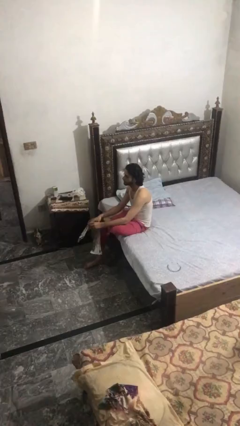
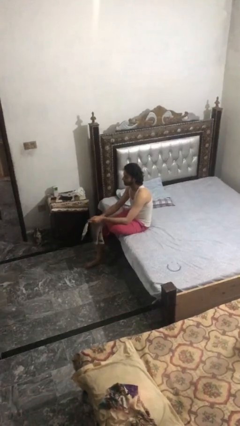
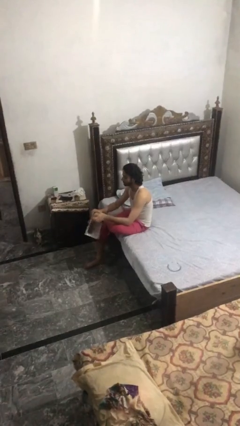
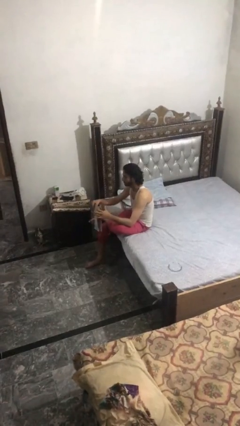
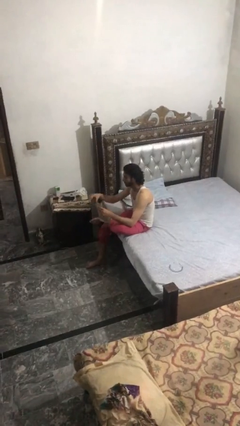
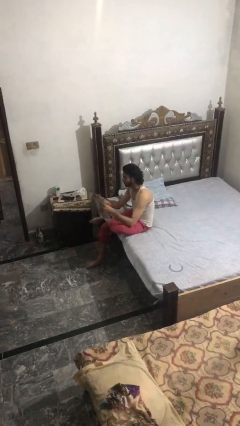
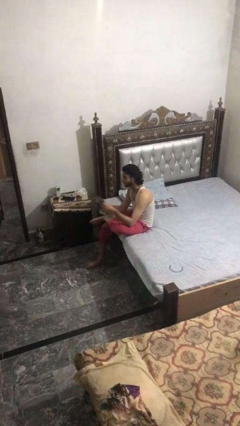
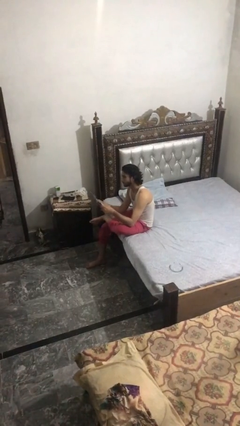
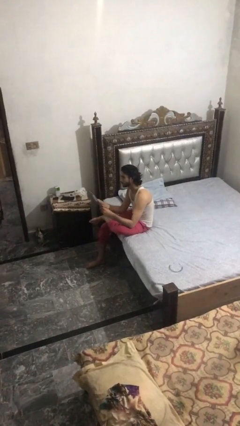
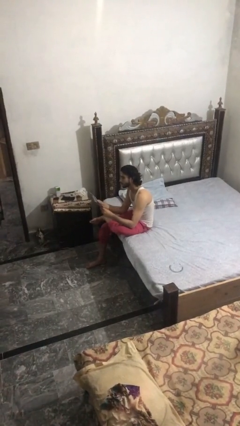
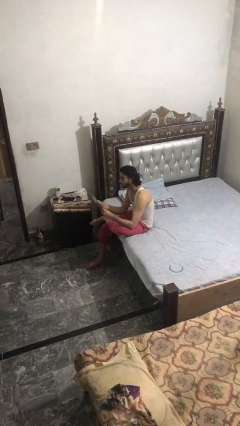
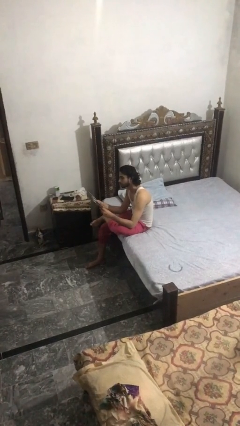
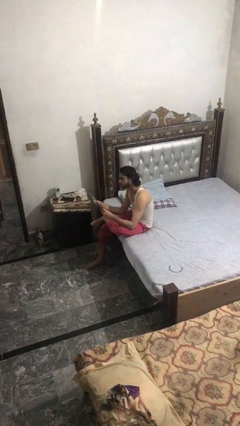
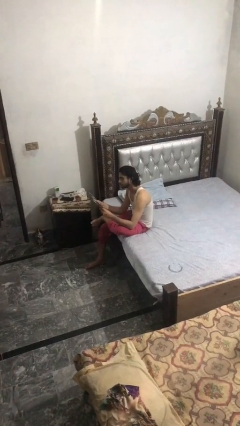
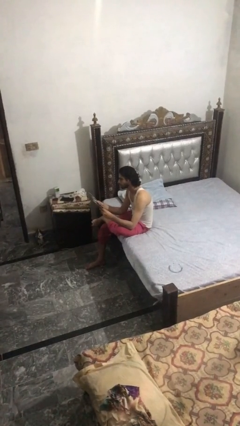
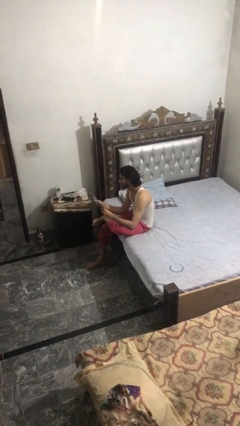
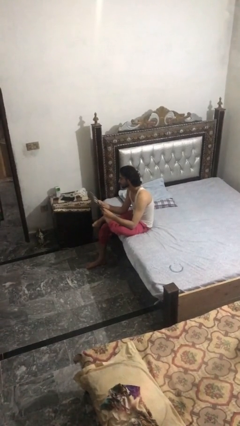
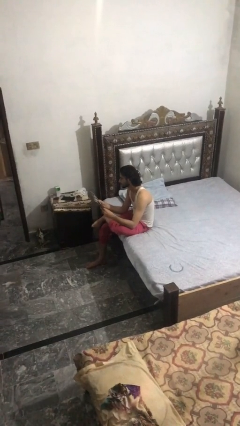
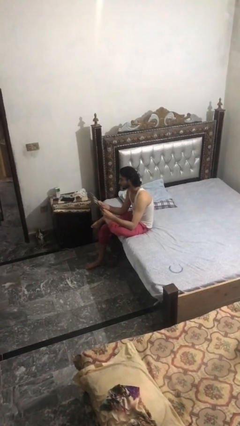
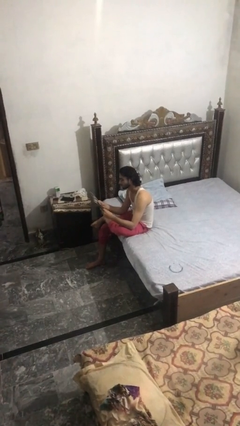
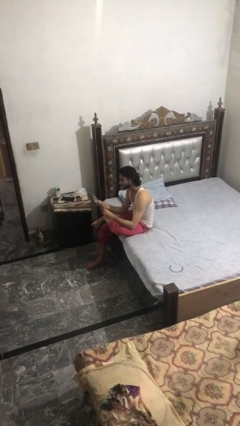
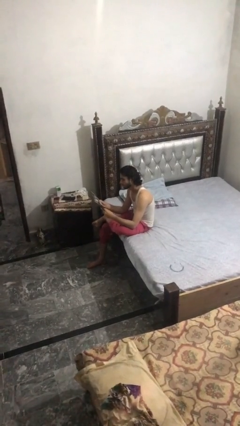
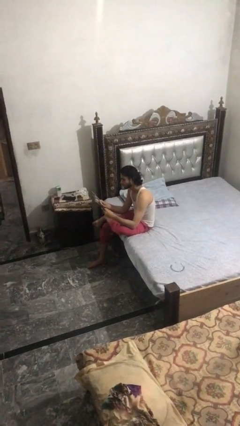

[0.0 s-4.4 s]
person reads newspaper

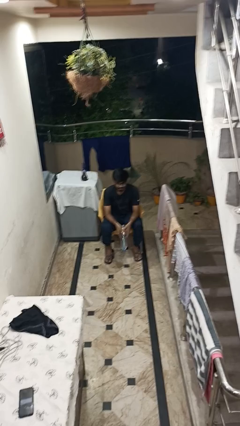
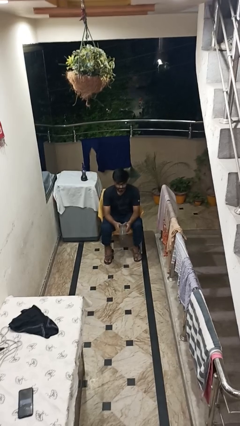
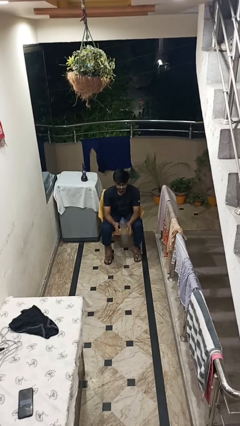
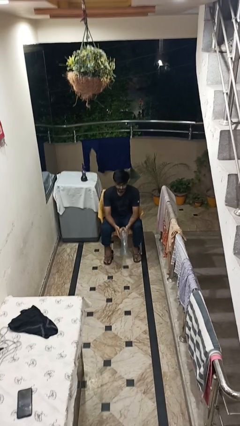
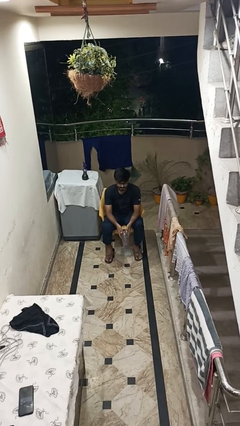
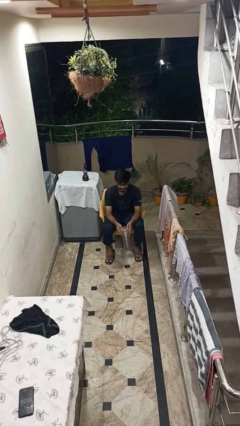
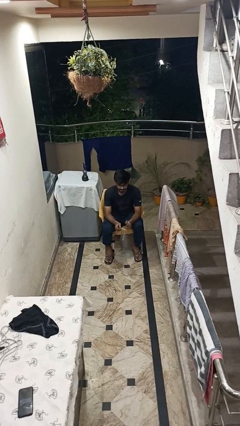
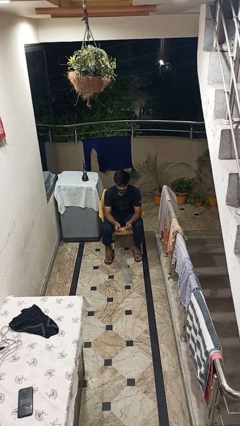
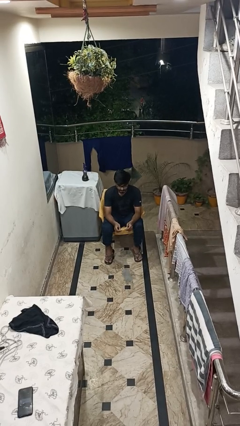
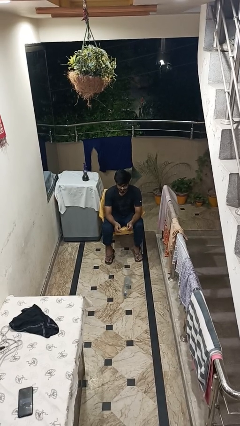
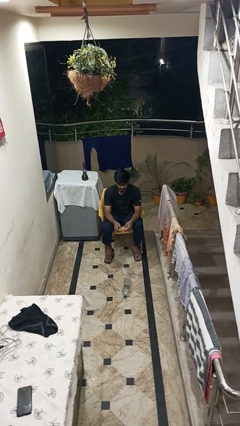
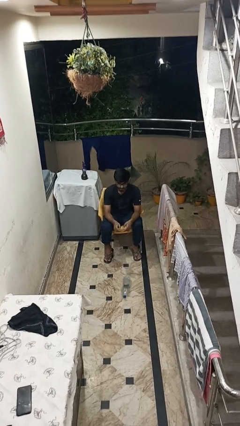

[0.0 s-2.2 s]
person drops object

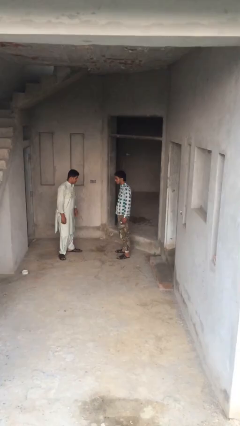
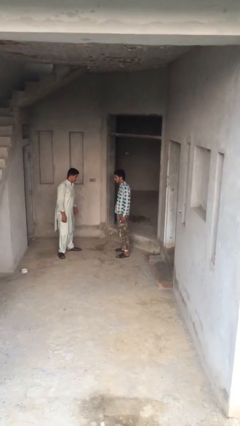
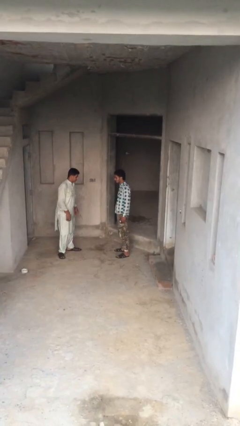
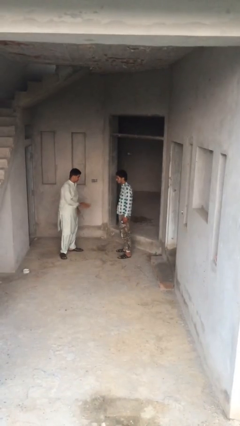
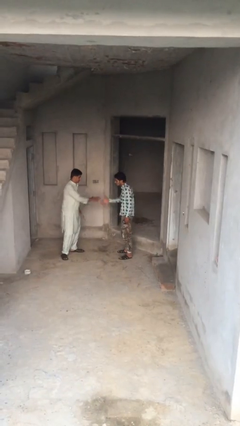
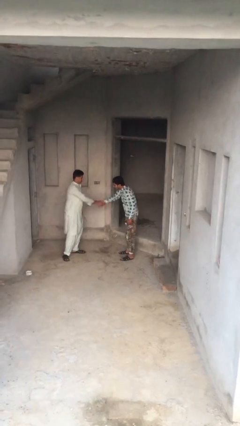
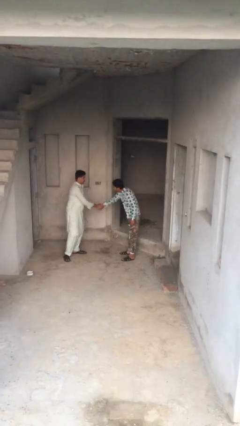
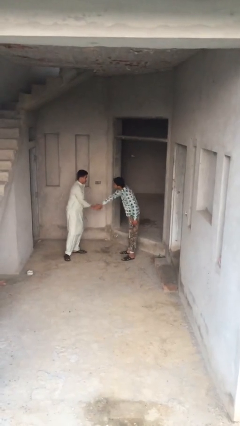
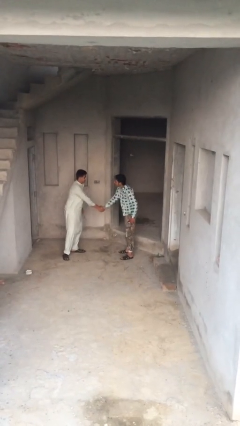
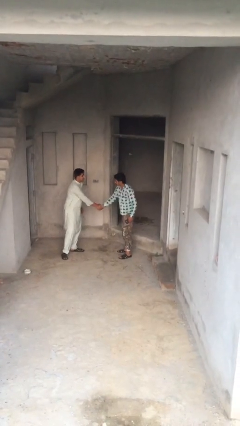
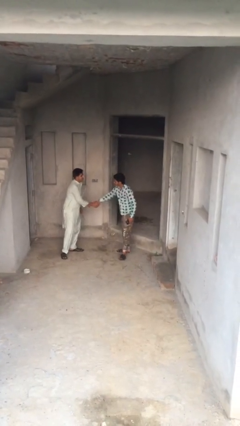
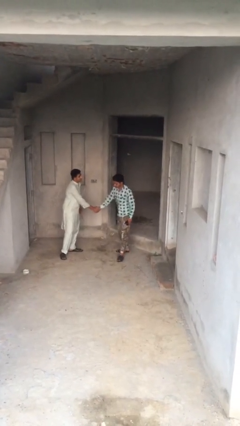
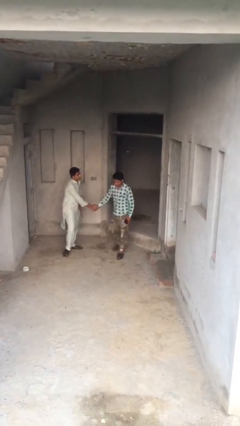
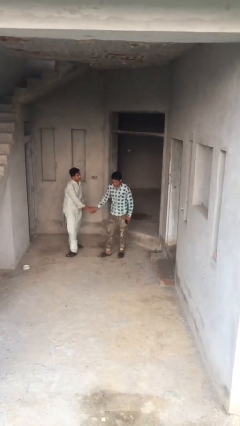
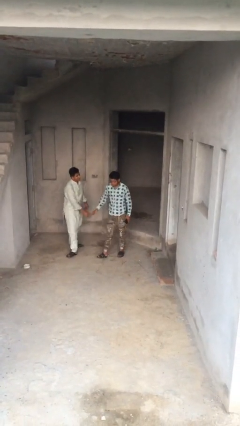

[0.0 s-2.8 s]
person shakes hand

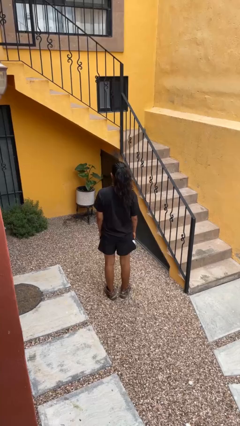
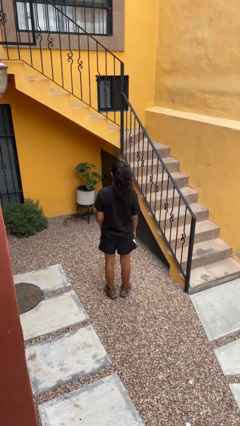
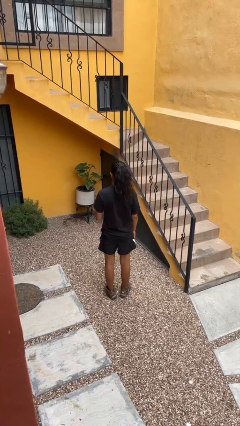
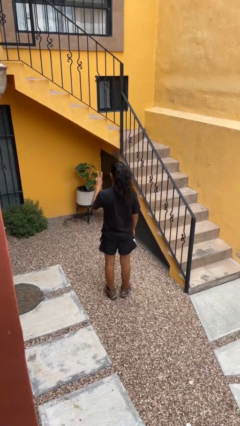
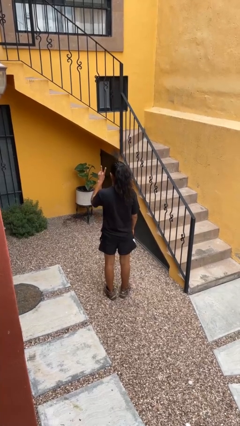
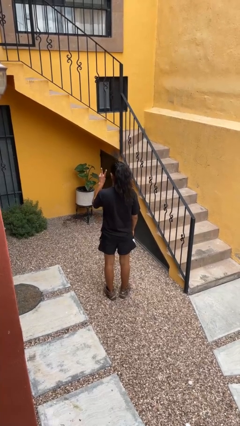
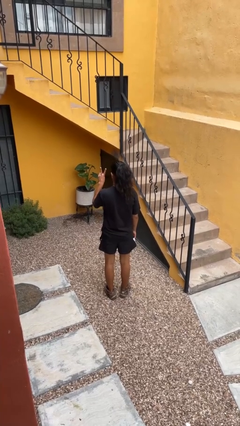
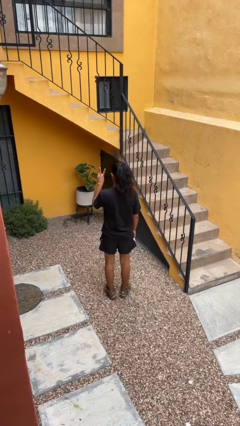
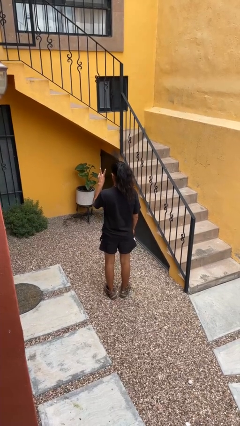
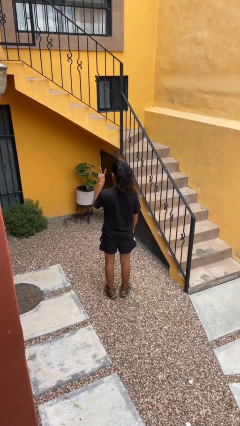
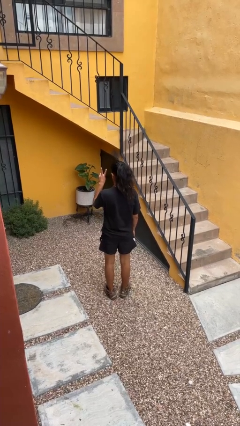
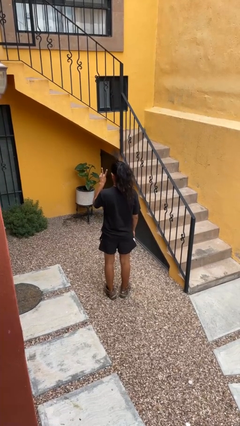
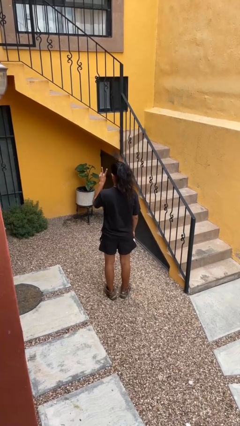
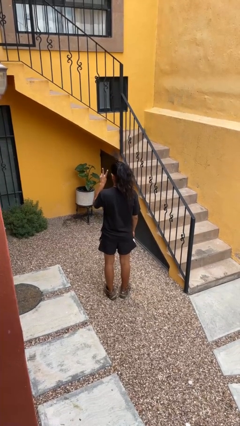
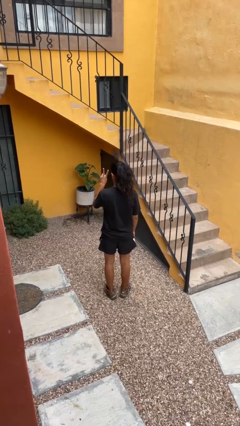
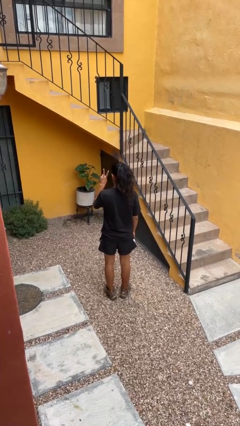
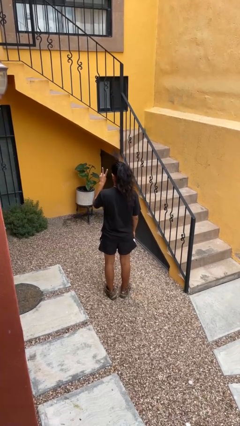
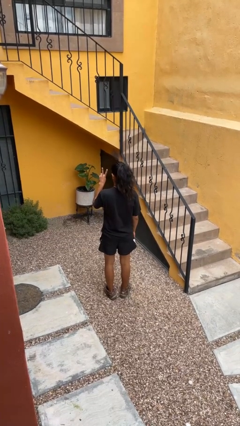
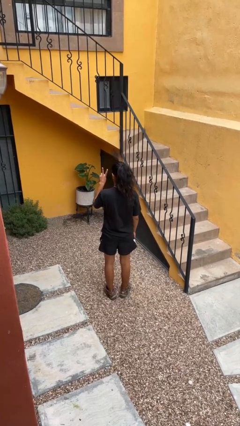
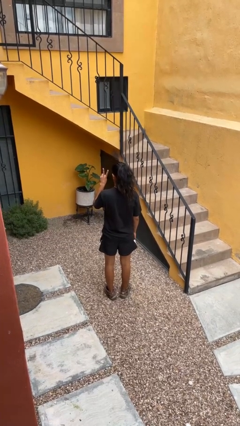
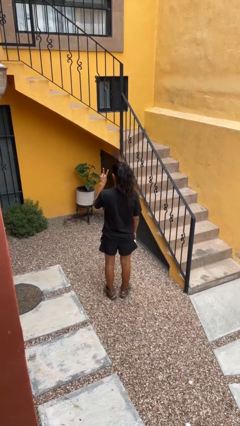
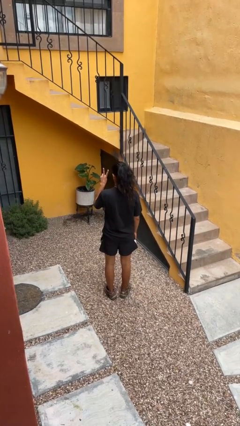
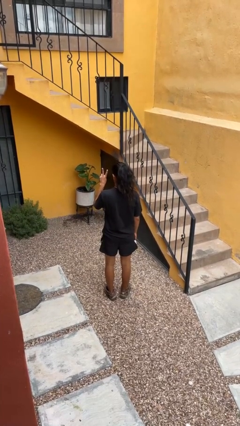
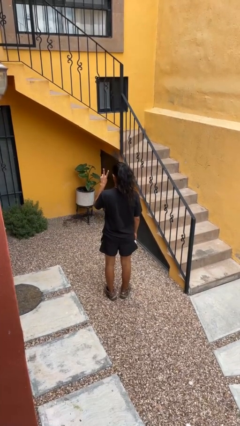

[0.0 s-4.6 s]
person gestures peace

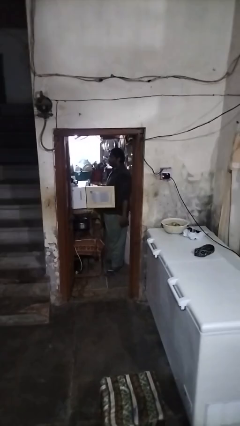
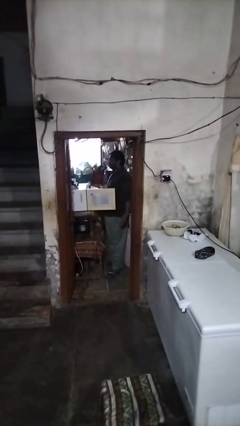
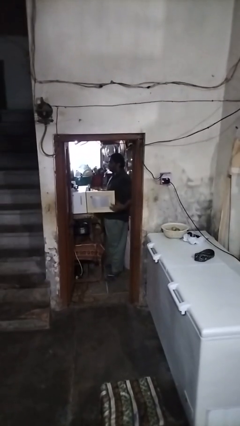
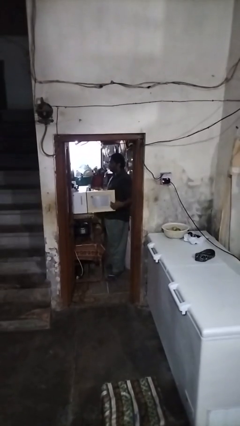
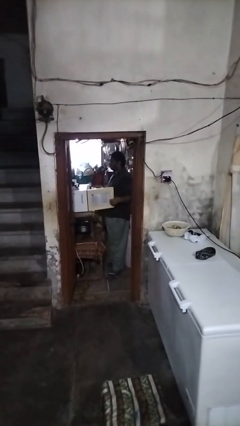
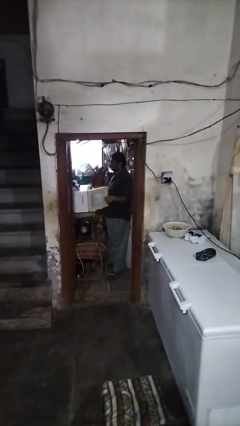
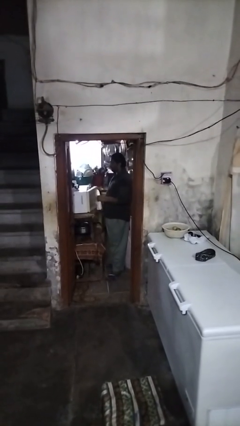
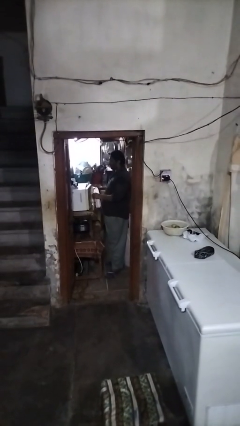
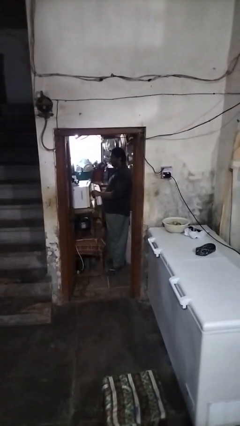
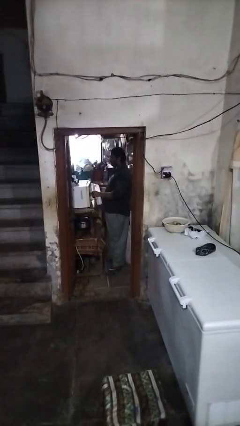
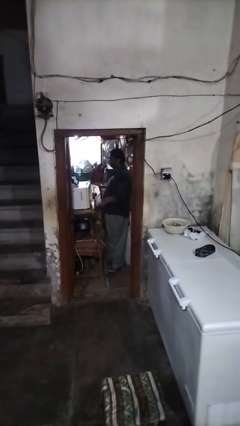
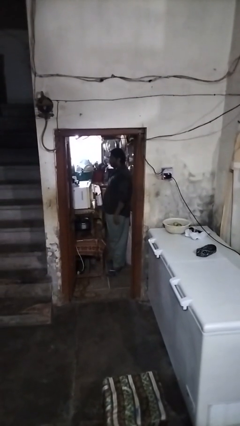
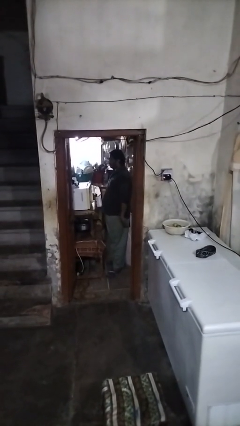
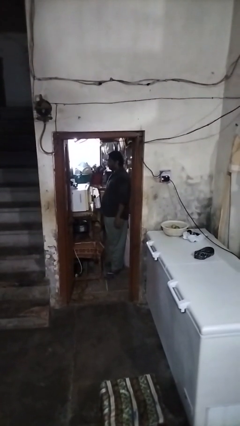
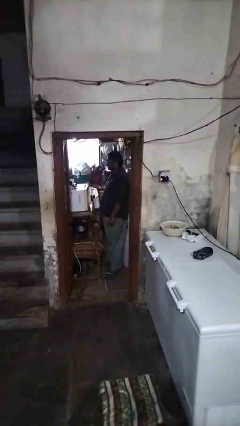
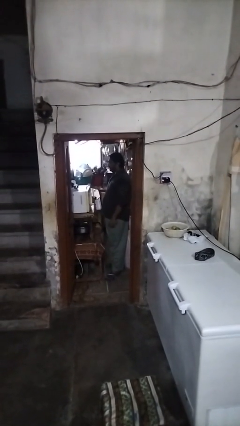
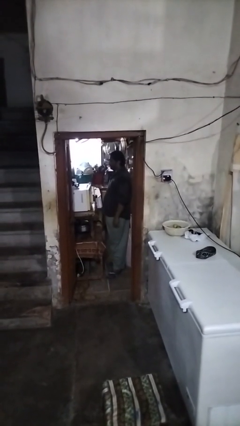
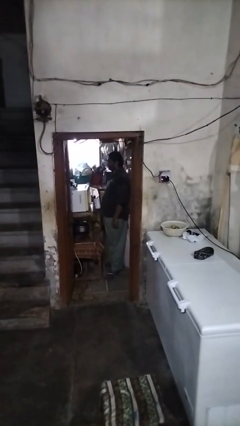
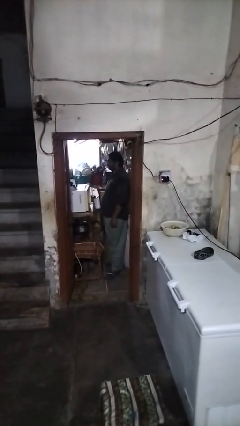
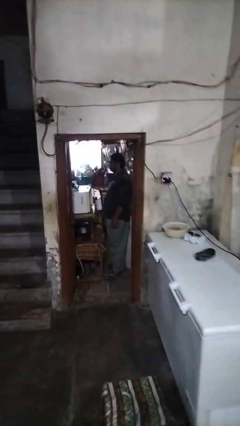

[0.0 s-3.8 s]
person closes oven door
